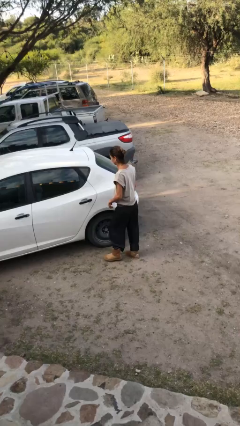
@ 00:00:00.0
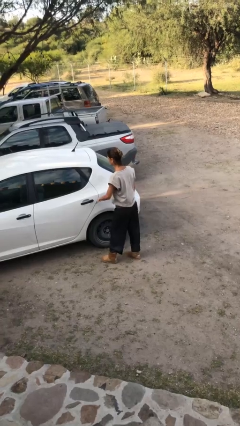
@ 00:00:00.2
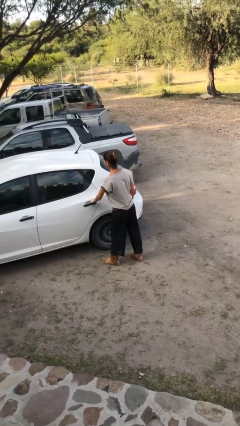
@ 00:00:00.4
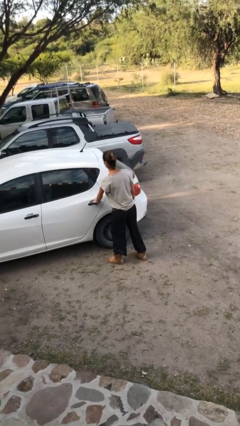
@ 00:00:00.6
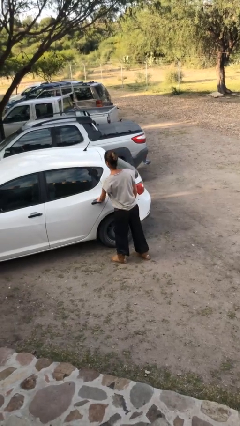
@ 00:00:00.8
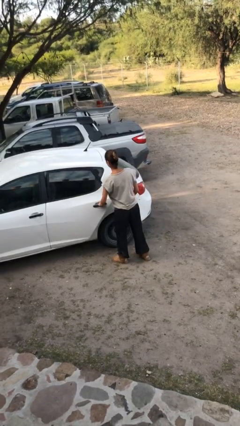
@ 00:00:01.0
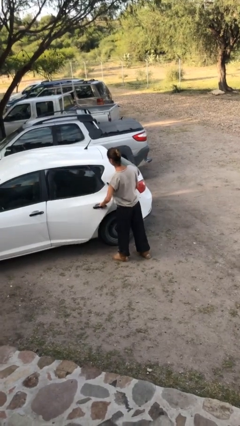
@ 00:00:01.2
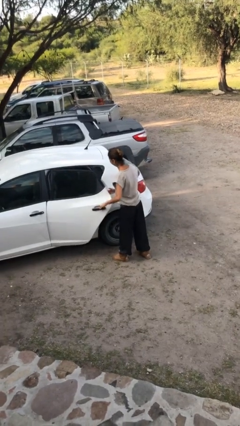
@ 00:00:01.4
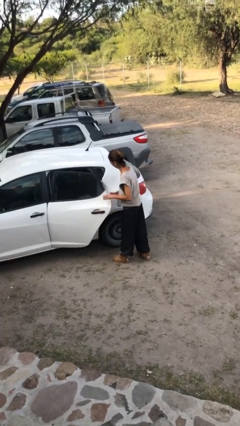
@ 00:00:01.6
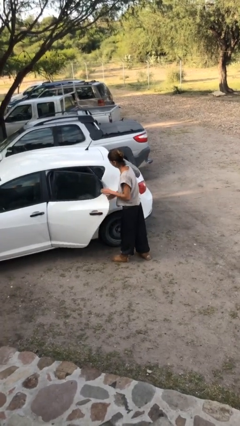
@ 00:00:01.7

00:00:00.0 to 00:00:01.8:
person opens car door

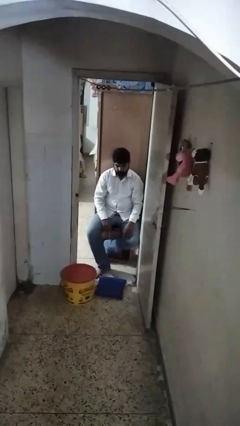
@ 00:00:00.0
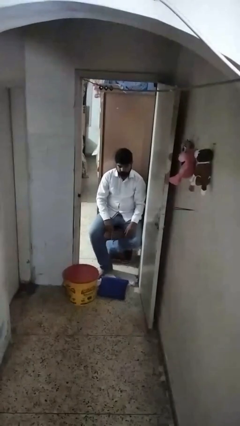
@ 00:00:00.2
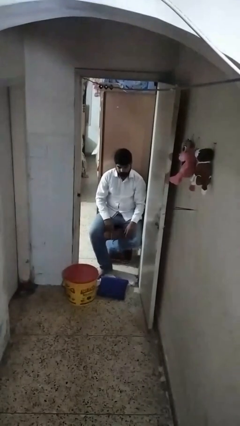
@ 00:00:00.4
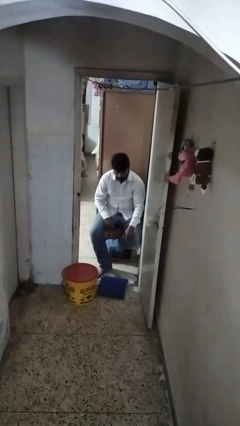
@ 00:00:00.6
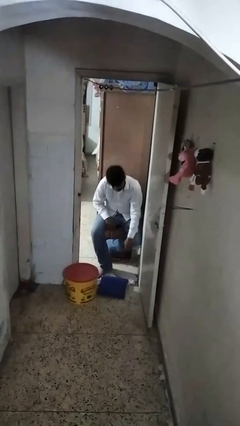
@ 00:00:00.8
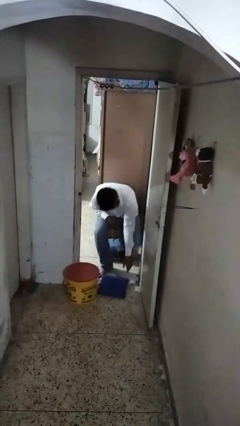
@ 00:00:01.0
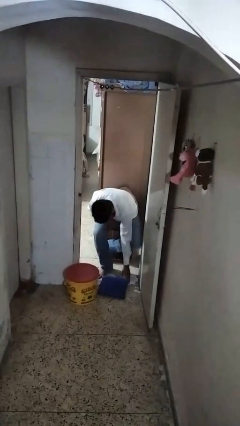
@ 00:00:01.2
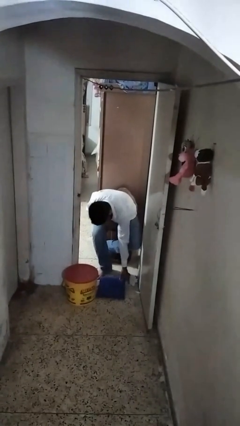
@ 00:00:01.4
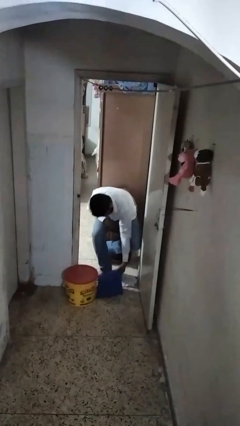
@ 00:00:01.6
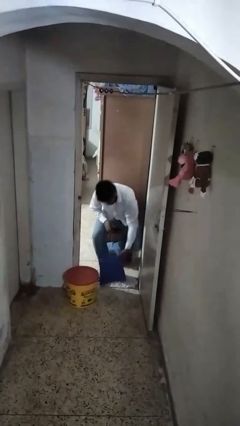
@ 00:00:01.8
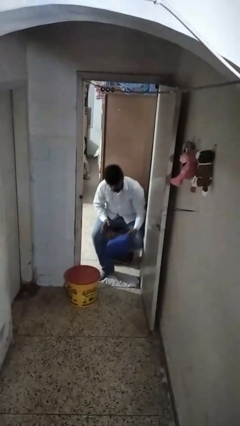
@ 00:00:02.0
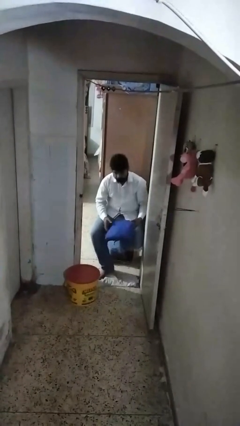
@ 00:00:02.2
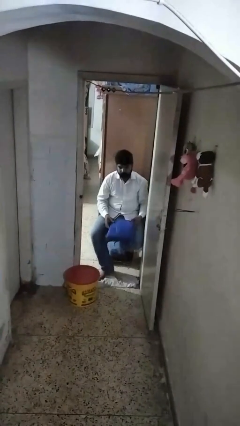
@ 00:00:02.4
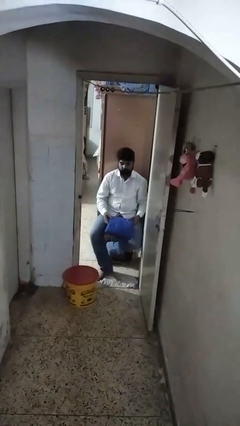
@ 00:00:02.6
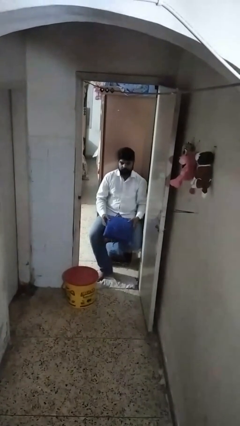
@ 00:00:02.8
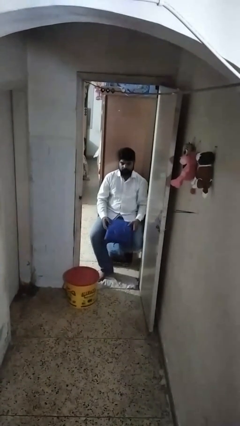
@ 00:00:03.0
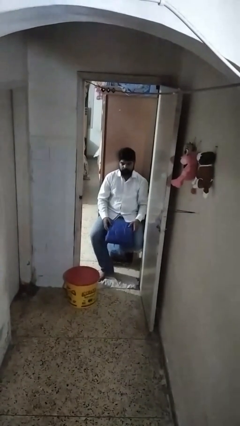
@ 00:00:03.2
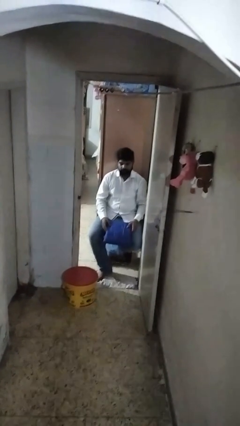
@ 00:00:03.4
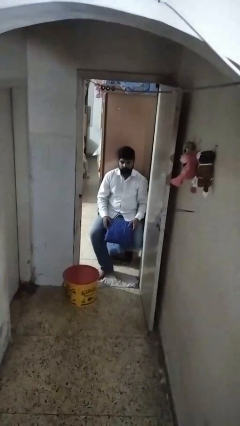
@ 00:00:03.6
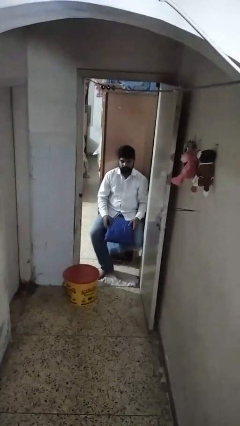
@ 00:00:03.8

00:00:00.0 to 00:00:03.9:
person picks up object from floor

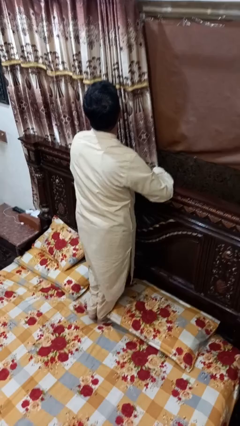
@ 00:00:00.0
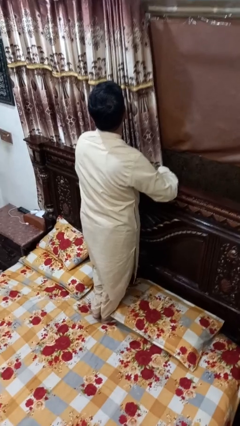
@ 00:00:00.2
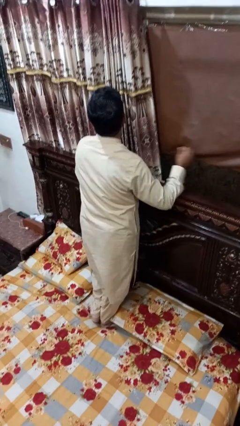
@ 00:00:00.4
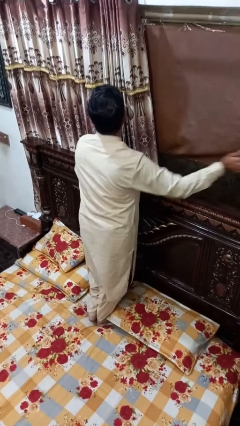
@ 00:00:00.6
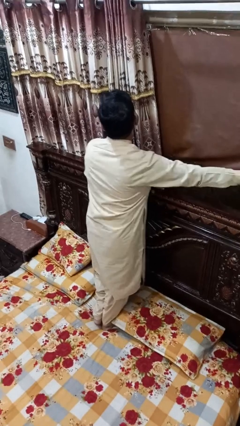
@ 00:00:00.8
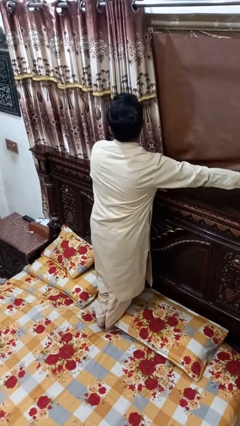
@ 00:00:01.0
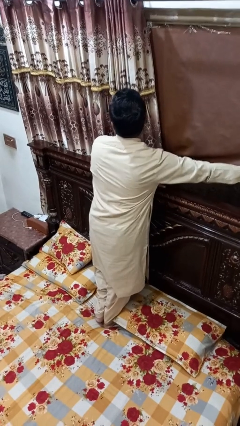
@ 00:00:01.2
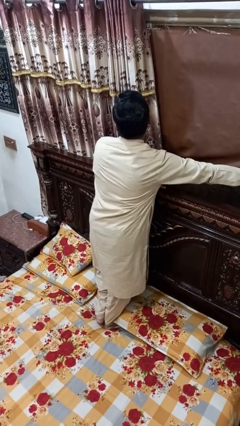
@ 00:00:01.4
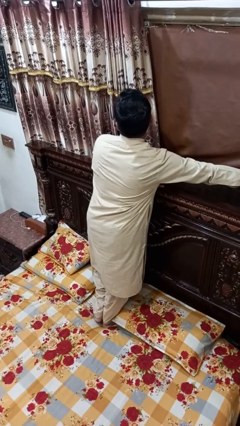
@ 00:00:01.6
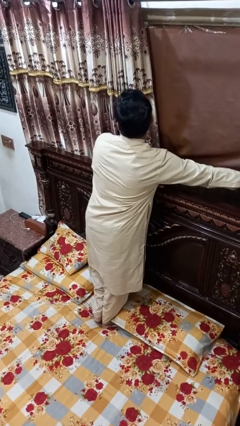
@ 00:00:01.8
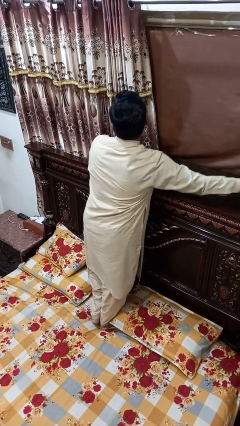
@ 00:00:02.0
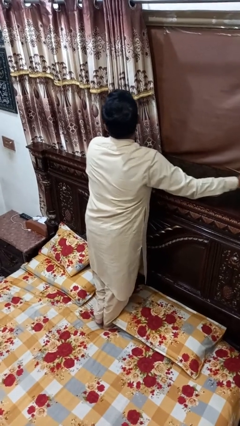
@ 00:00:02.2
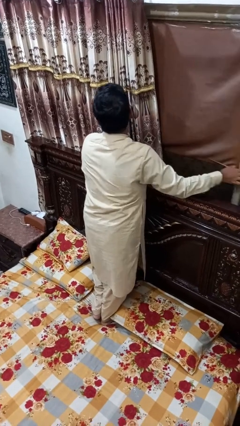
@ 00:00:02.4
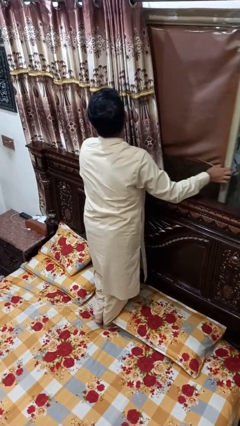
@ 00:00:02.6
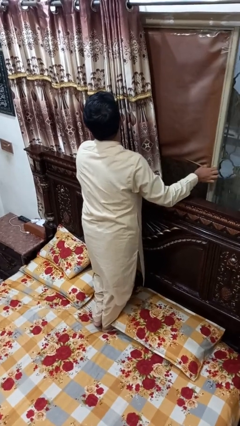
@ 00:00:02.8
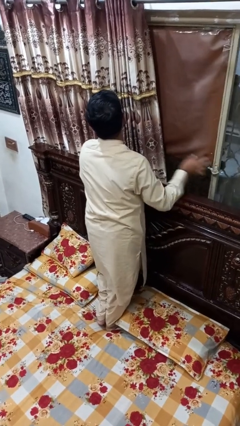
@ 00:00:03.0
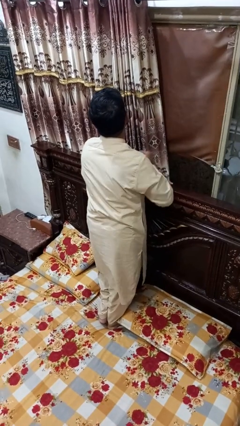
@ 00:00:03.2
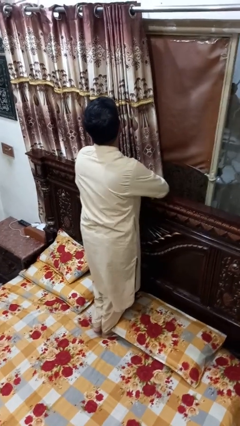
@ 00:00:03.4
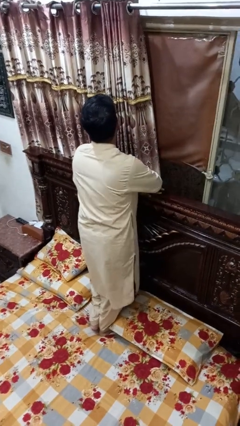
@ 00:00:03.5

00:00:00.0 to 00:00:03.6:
person opens home window

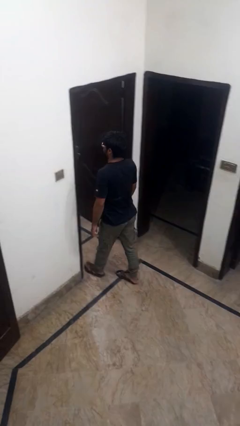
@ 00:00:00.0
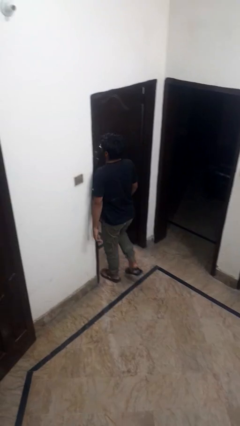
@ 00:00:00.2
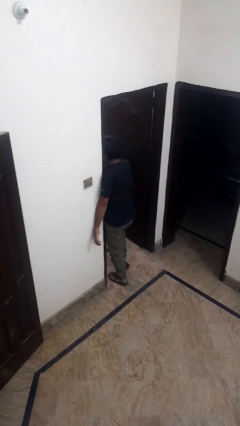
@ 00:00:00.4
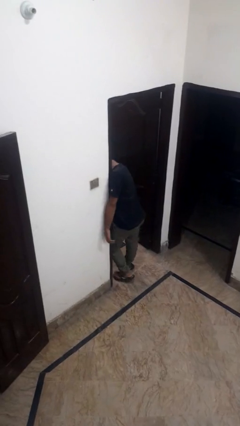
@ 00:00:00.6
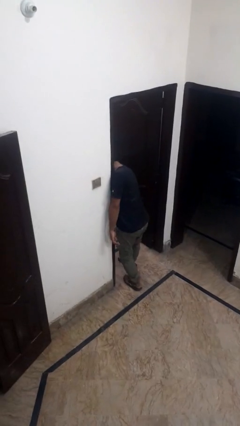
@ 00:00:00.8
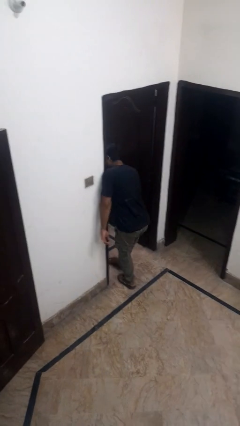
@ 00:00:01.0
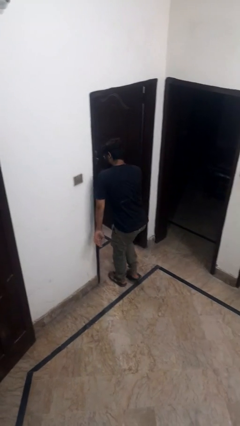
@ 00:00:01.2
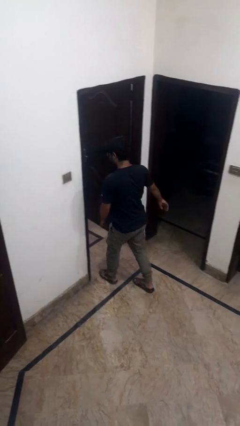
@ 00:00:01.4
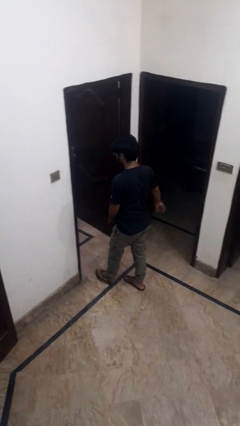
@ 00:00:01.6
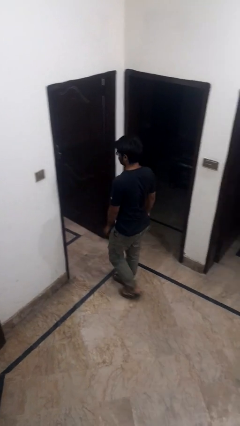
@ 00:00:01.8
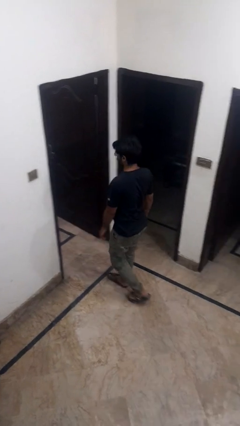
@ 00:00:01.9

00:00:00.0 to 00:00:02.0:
person bumps into wall

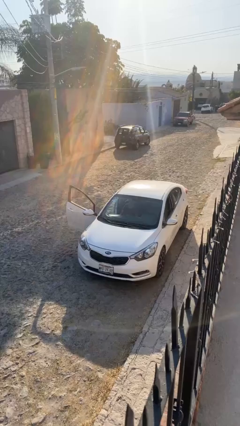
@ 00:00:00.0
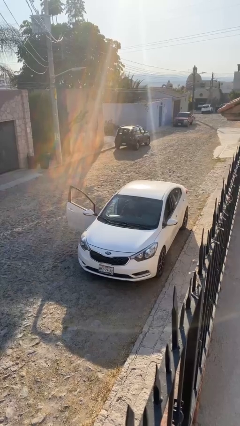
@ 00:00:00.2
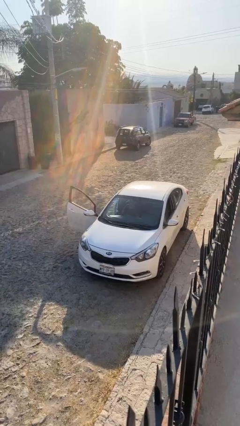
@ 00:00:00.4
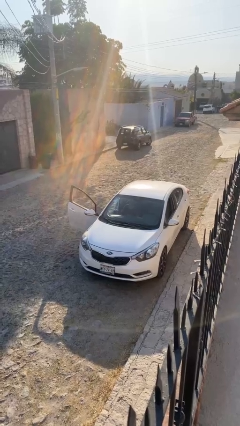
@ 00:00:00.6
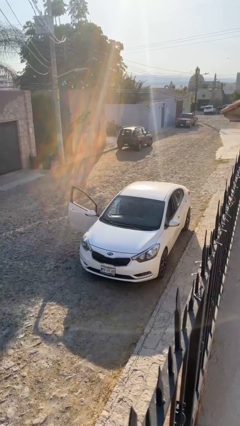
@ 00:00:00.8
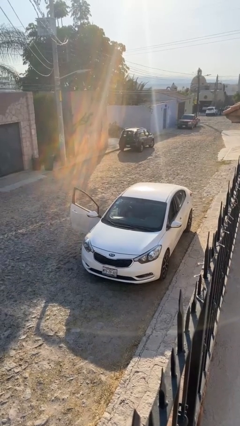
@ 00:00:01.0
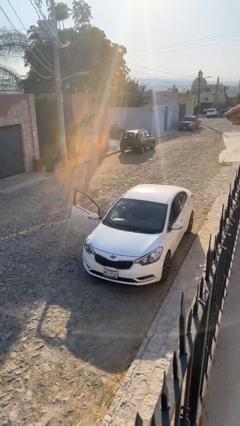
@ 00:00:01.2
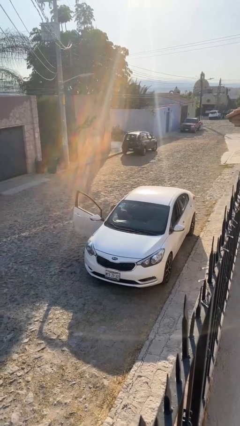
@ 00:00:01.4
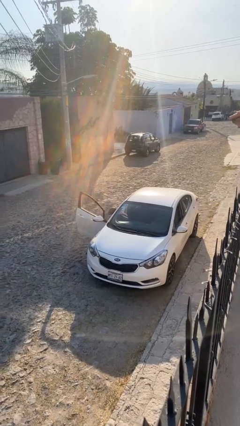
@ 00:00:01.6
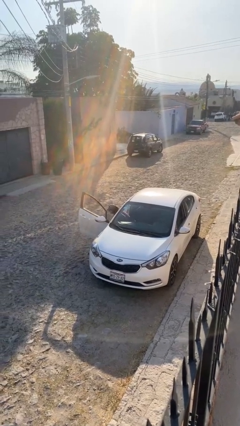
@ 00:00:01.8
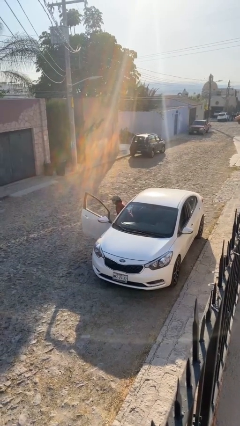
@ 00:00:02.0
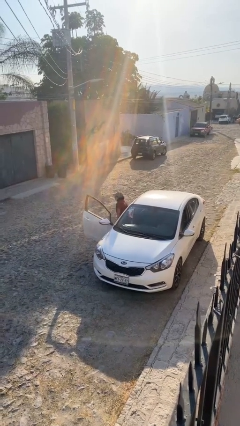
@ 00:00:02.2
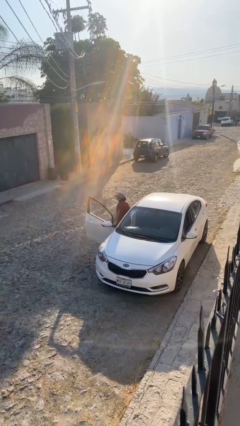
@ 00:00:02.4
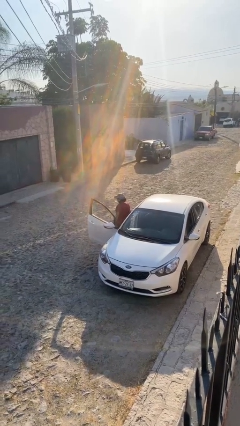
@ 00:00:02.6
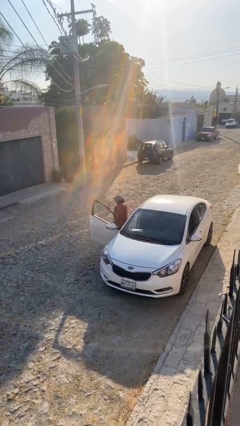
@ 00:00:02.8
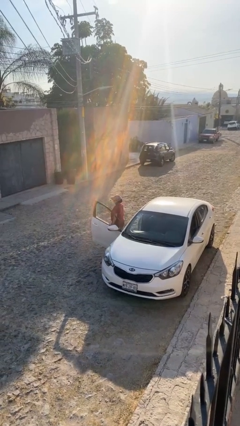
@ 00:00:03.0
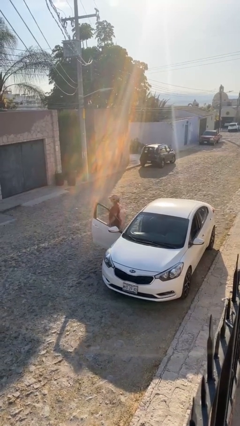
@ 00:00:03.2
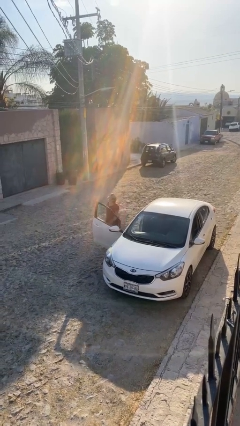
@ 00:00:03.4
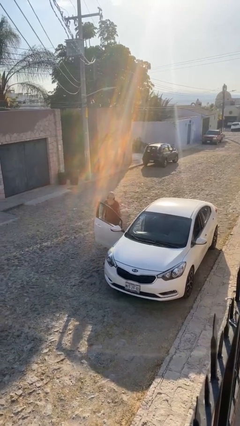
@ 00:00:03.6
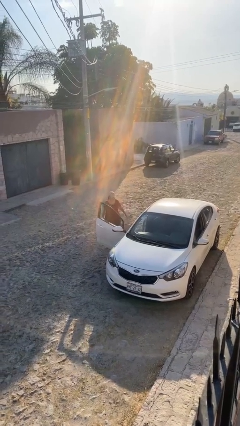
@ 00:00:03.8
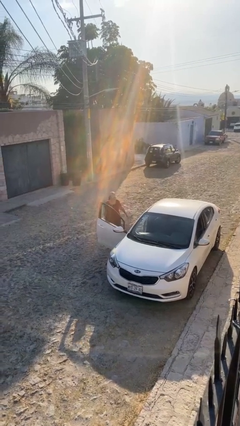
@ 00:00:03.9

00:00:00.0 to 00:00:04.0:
person exits car

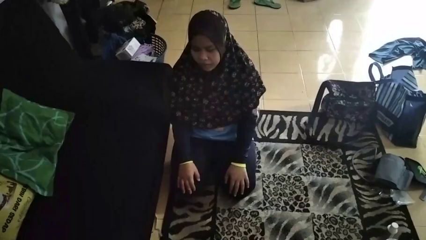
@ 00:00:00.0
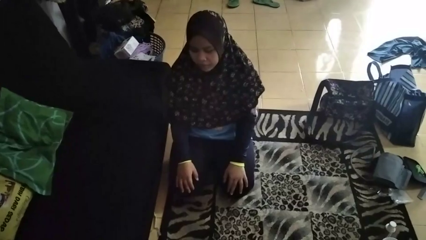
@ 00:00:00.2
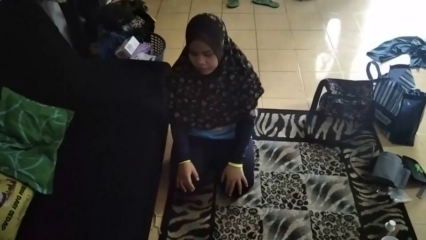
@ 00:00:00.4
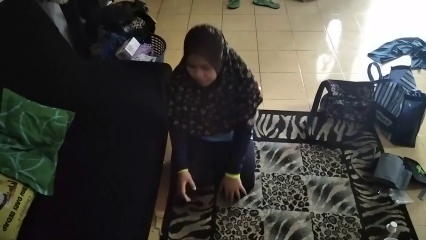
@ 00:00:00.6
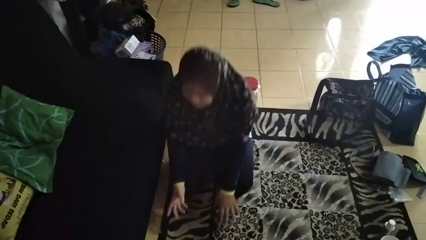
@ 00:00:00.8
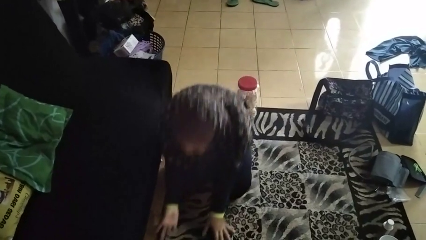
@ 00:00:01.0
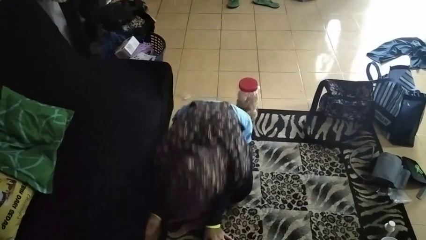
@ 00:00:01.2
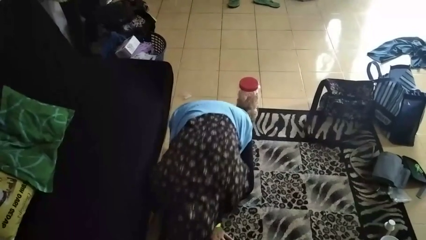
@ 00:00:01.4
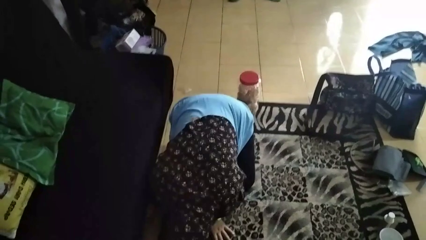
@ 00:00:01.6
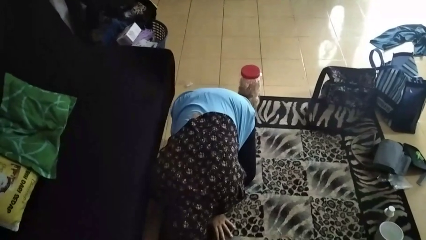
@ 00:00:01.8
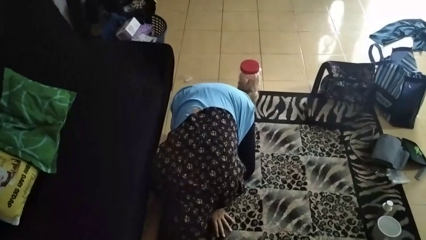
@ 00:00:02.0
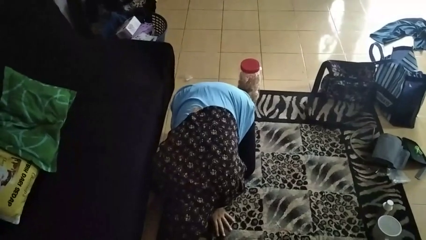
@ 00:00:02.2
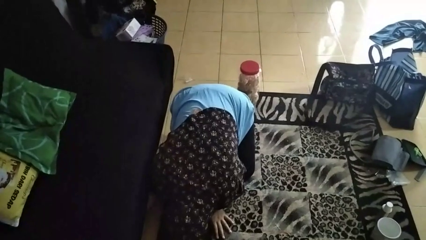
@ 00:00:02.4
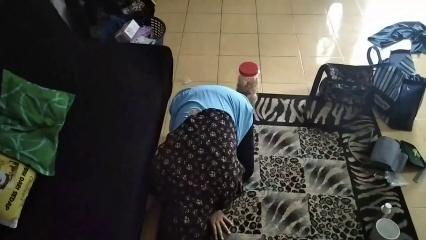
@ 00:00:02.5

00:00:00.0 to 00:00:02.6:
person searches under couch
